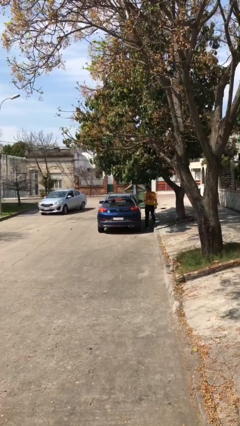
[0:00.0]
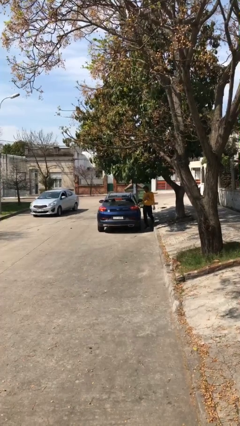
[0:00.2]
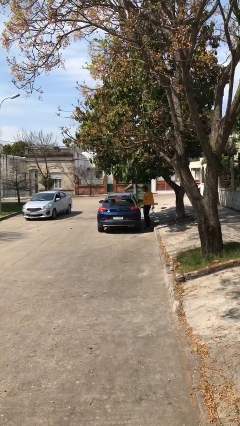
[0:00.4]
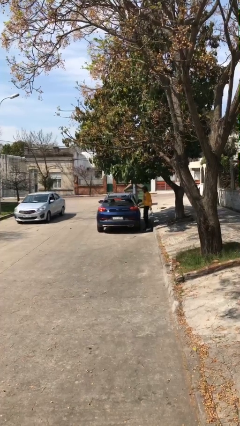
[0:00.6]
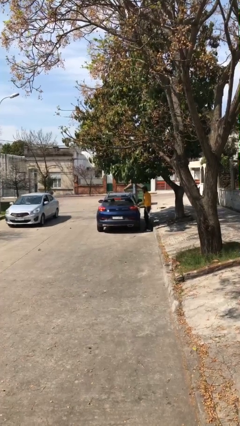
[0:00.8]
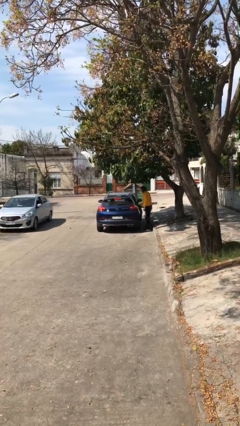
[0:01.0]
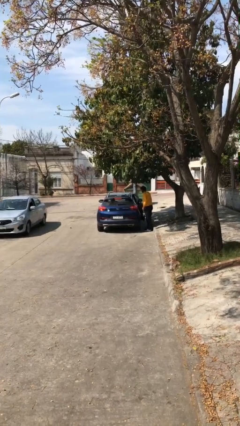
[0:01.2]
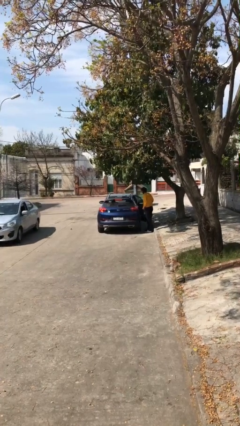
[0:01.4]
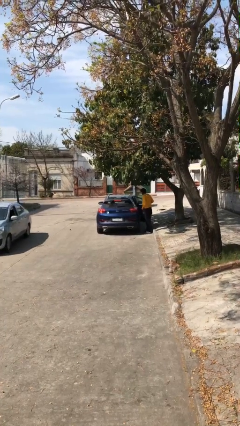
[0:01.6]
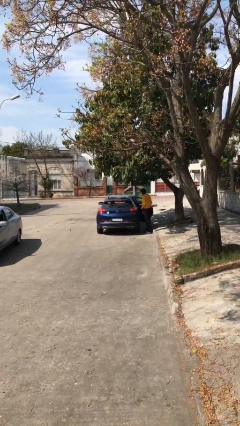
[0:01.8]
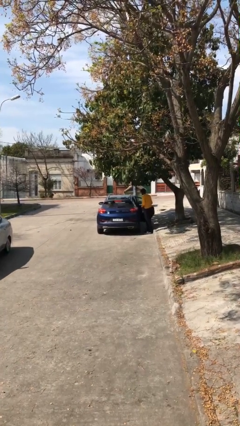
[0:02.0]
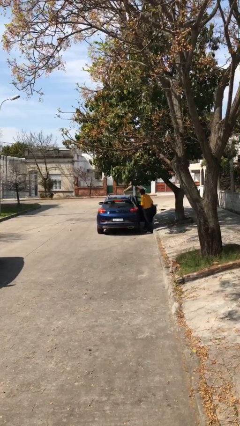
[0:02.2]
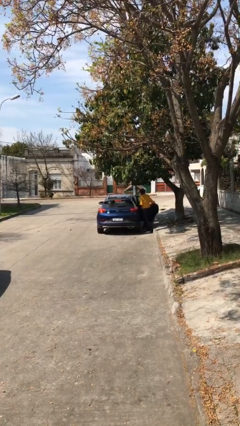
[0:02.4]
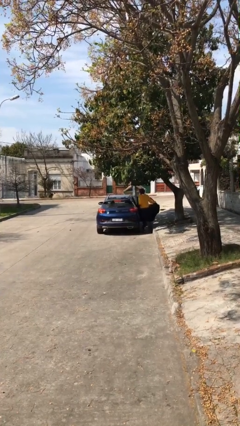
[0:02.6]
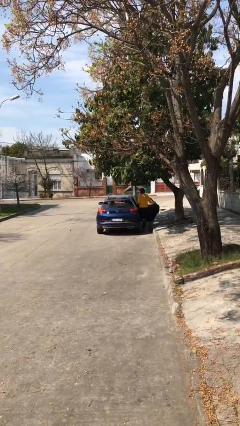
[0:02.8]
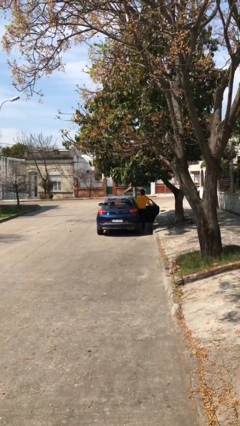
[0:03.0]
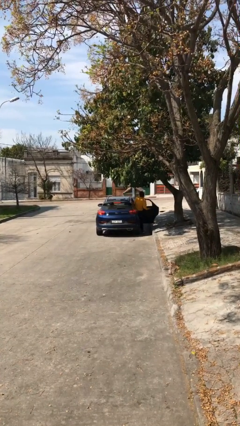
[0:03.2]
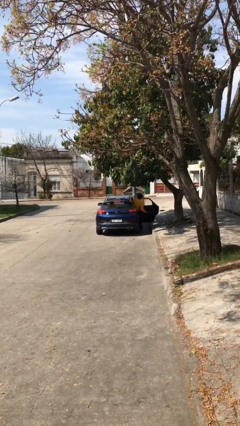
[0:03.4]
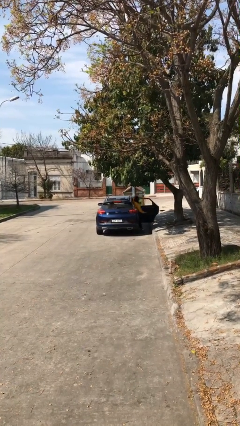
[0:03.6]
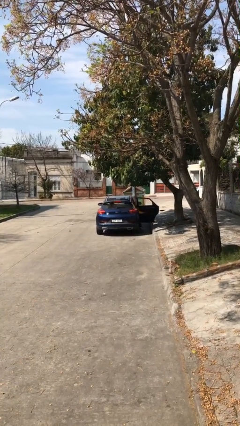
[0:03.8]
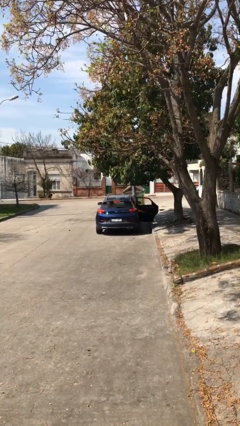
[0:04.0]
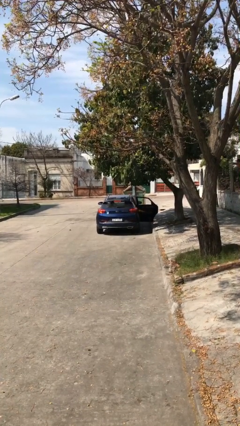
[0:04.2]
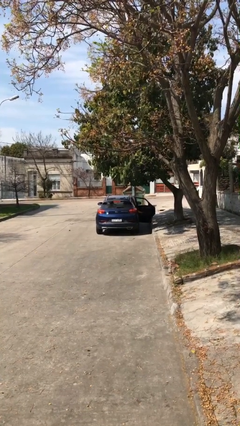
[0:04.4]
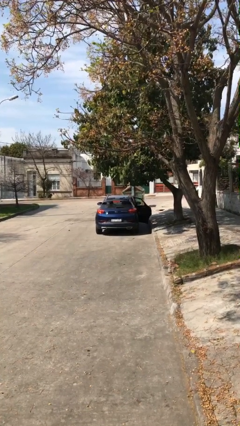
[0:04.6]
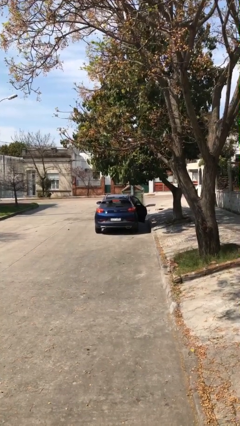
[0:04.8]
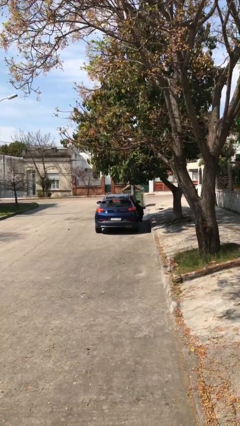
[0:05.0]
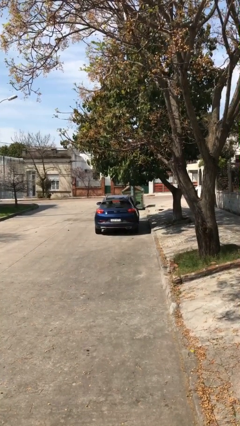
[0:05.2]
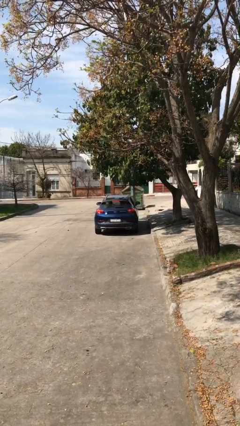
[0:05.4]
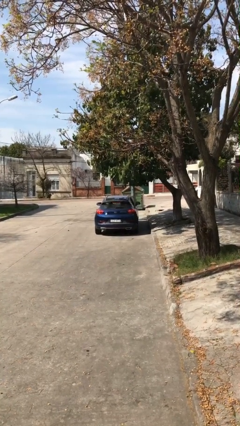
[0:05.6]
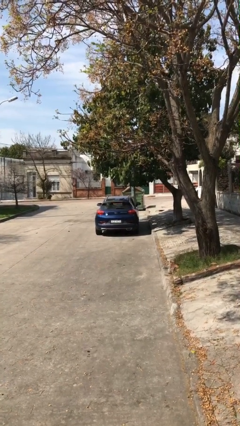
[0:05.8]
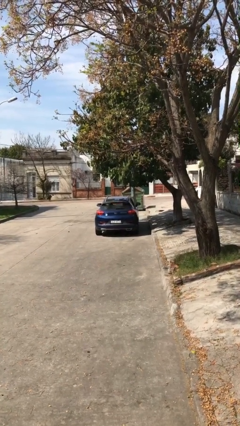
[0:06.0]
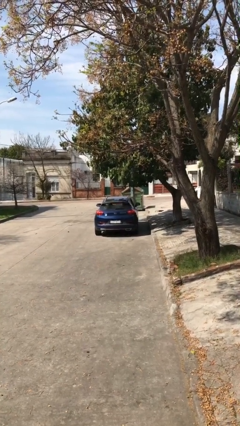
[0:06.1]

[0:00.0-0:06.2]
car picks up person

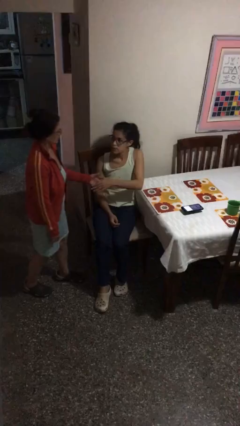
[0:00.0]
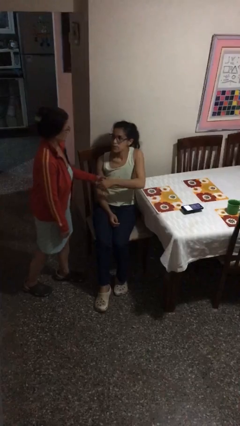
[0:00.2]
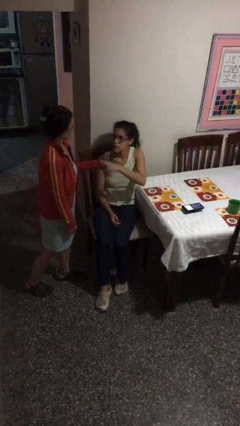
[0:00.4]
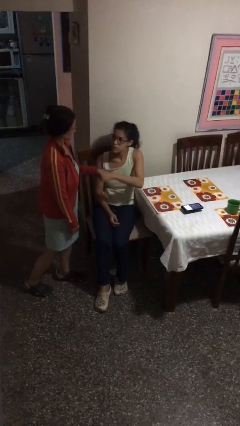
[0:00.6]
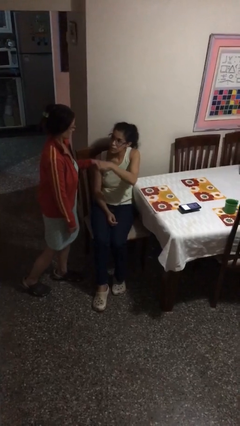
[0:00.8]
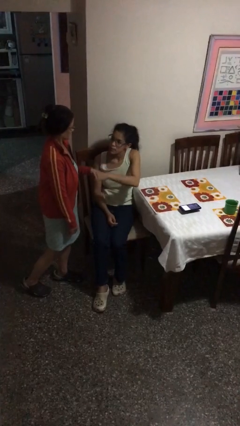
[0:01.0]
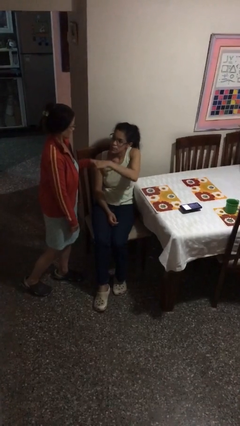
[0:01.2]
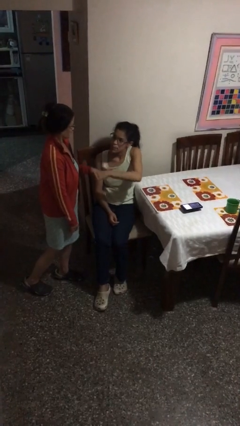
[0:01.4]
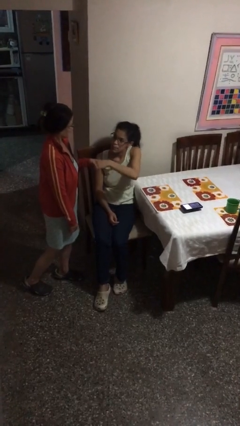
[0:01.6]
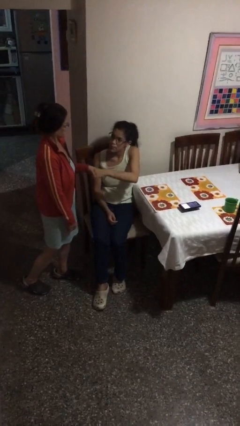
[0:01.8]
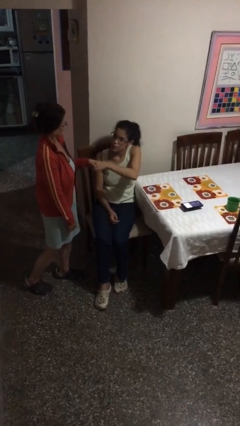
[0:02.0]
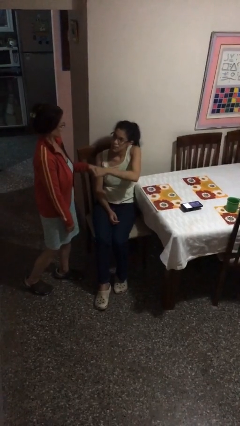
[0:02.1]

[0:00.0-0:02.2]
person shakes hand

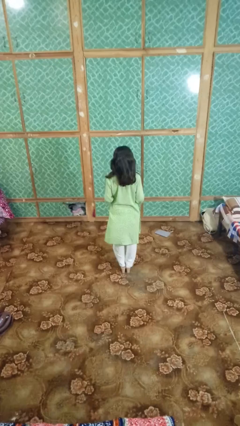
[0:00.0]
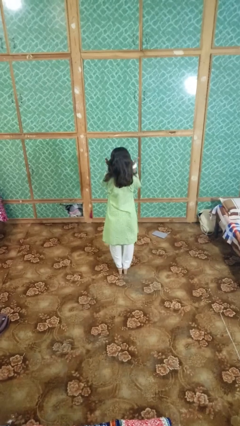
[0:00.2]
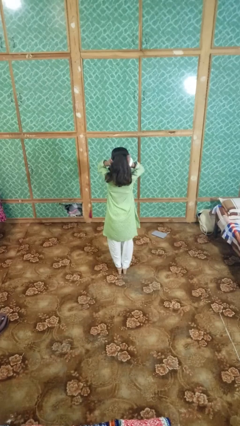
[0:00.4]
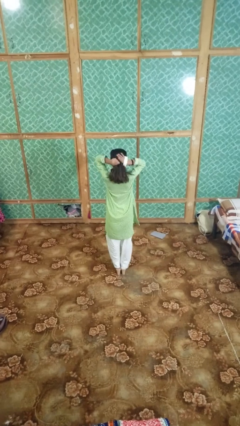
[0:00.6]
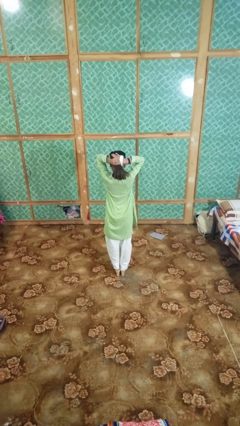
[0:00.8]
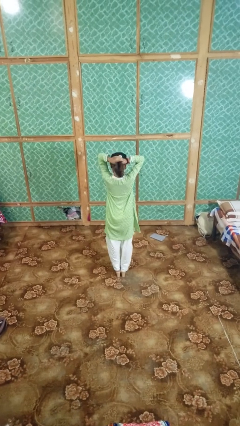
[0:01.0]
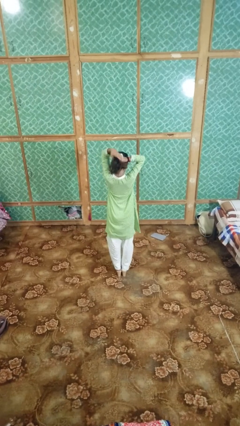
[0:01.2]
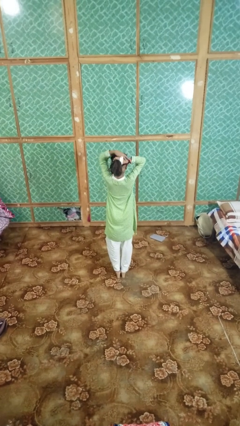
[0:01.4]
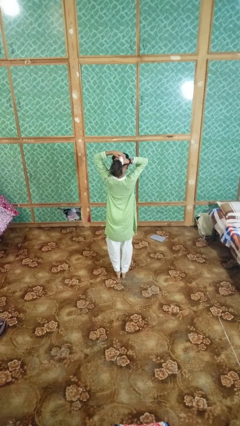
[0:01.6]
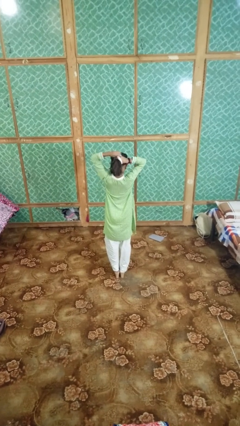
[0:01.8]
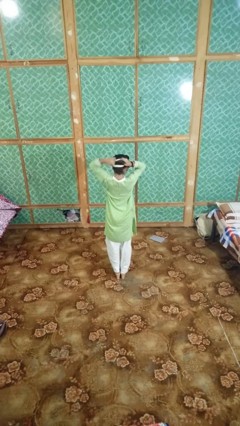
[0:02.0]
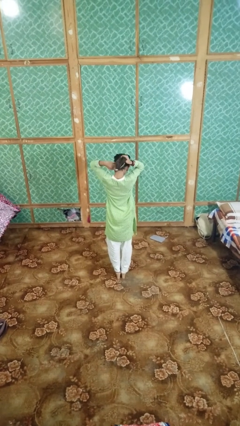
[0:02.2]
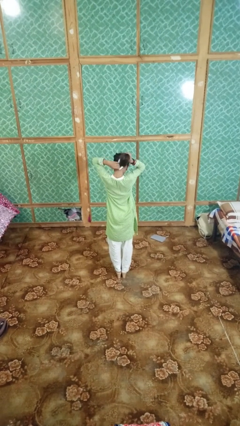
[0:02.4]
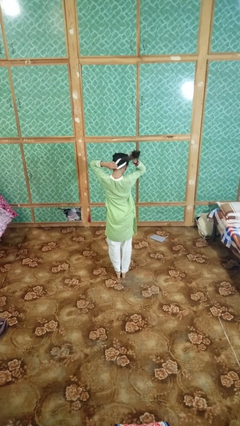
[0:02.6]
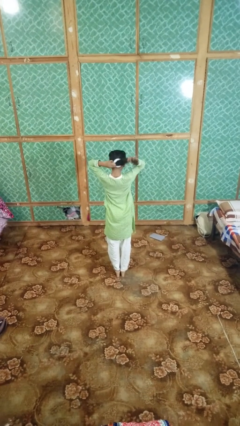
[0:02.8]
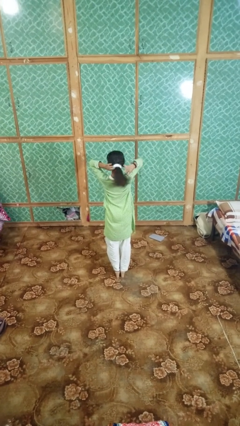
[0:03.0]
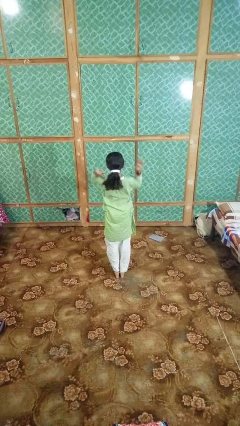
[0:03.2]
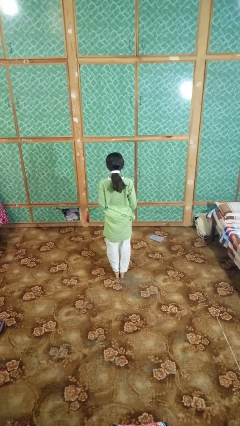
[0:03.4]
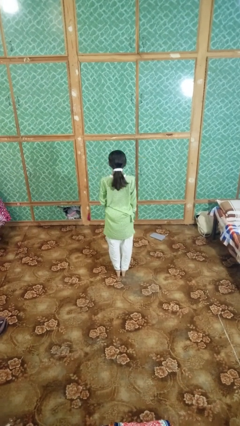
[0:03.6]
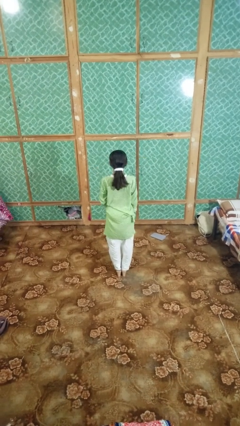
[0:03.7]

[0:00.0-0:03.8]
person puts hair in ponytail

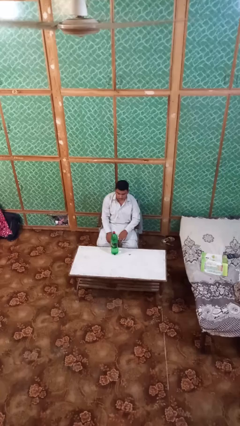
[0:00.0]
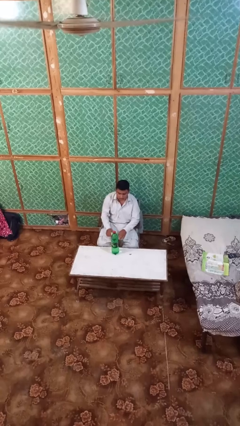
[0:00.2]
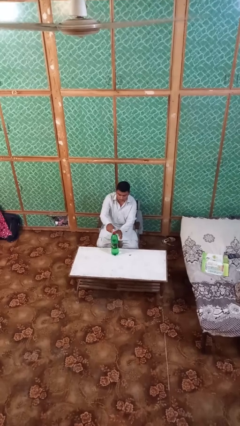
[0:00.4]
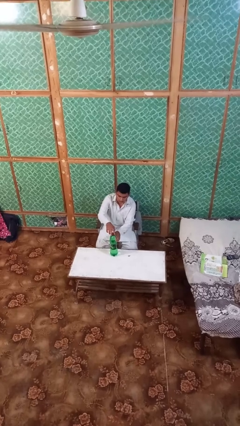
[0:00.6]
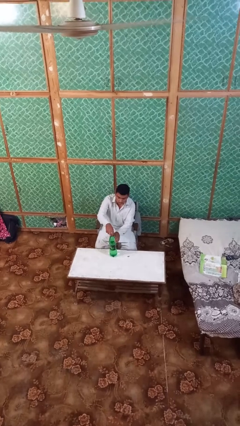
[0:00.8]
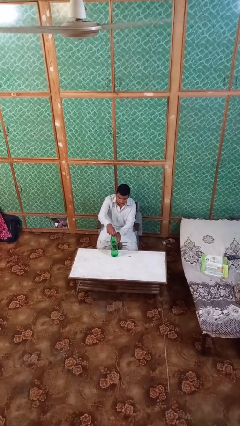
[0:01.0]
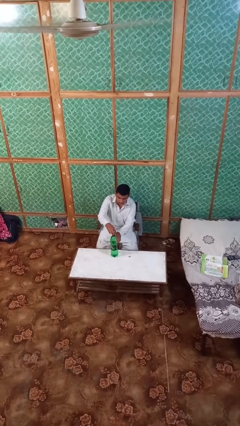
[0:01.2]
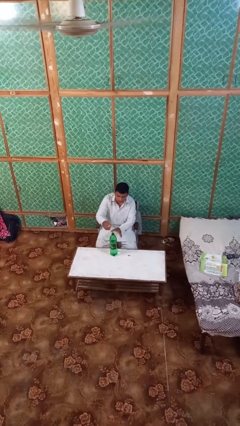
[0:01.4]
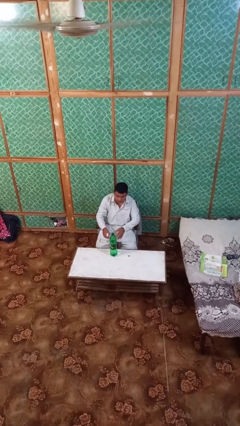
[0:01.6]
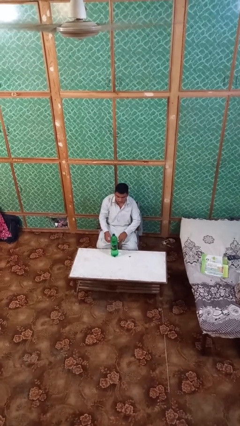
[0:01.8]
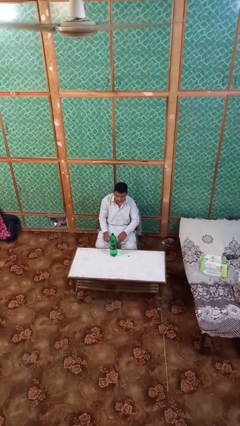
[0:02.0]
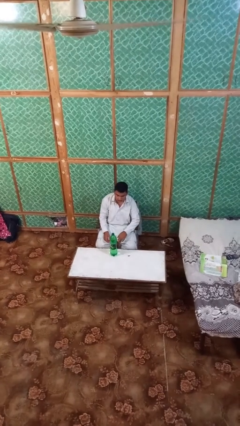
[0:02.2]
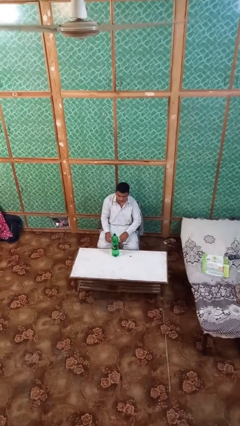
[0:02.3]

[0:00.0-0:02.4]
person unscrews lid from bottle

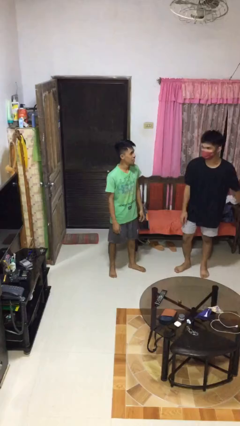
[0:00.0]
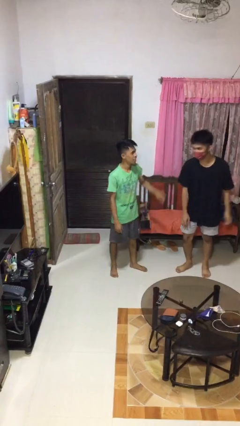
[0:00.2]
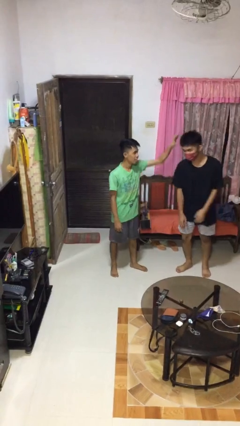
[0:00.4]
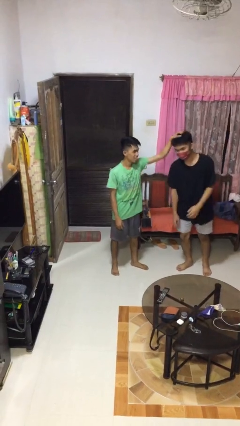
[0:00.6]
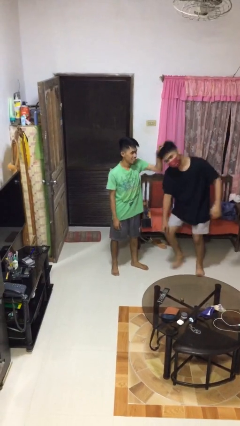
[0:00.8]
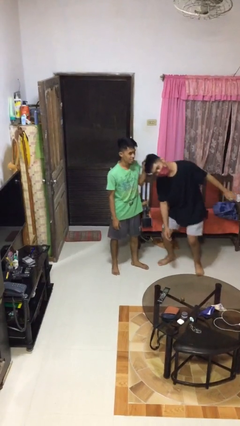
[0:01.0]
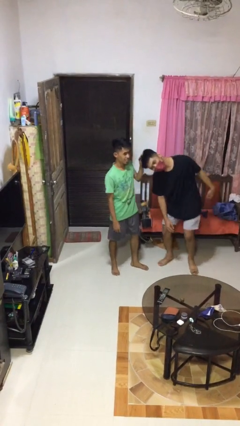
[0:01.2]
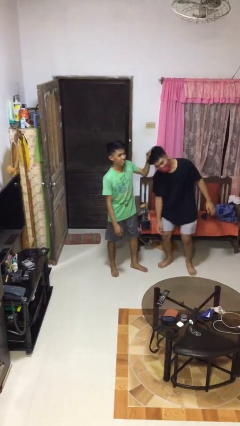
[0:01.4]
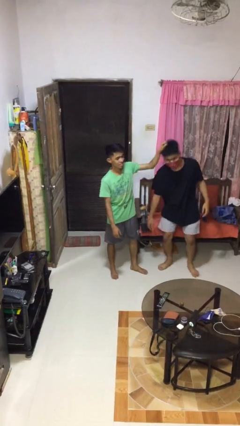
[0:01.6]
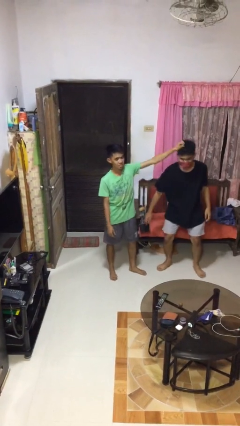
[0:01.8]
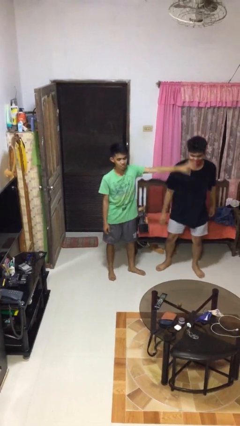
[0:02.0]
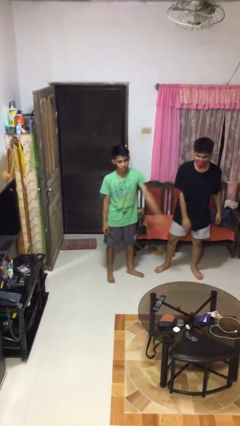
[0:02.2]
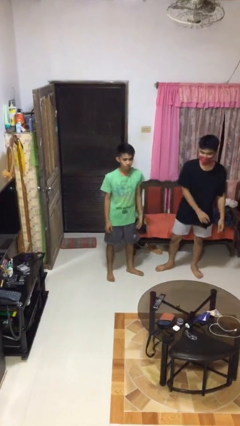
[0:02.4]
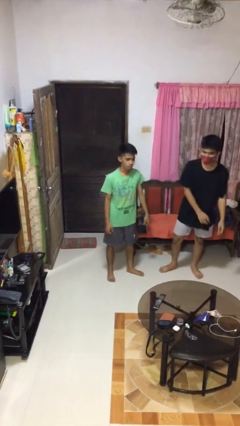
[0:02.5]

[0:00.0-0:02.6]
person grabs person by hair

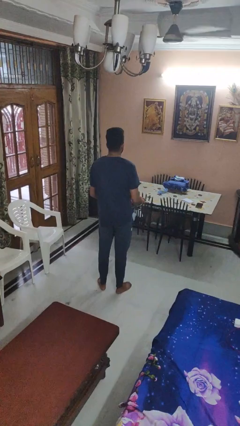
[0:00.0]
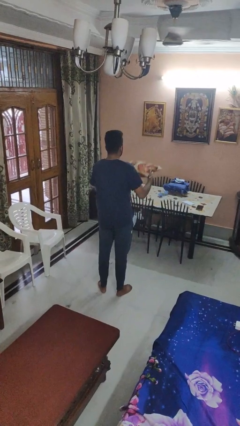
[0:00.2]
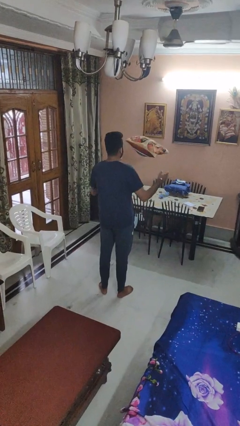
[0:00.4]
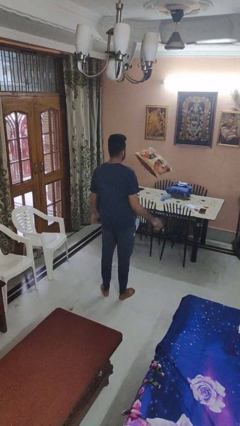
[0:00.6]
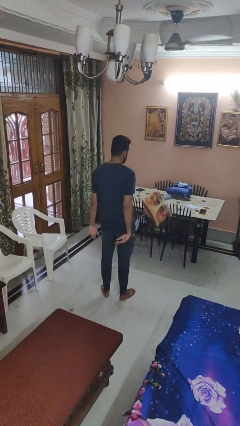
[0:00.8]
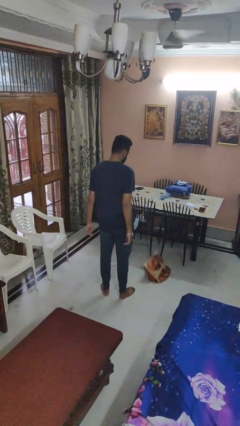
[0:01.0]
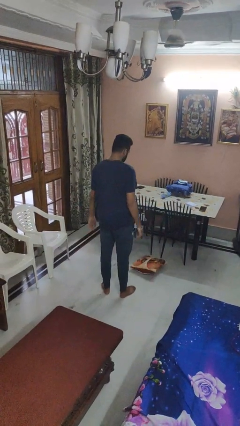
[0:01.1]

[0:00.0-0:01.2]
person throws object into air
